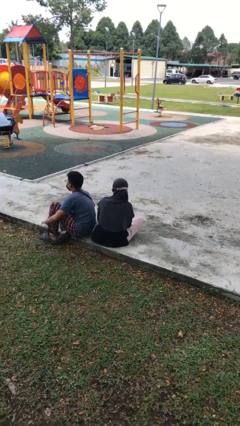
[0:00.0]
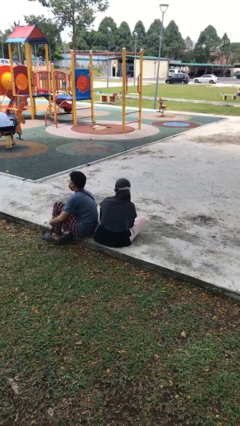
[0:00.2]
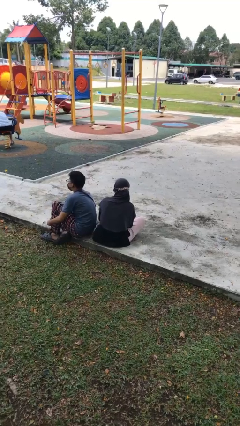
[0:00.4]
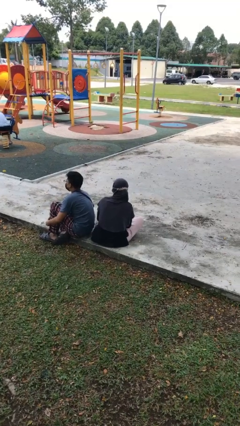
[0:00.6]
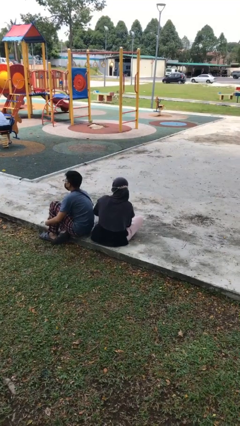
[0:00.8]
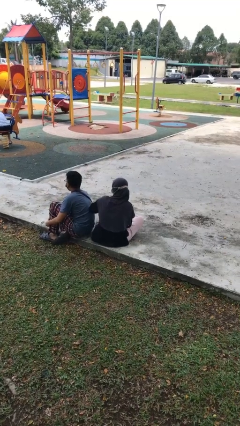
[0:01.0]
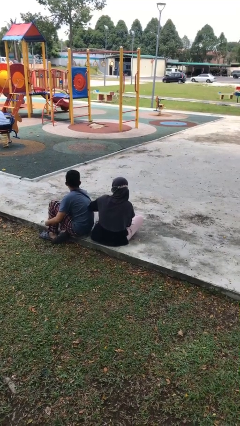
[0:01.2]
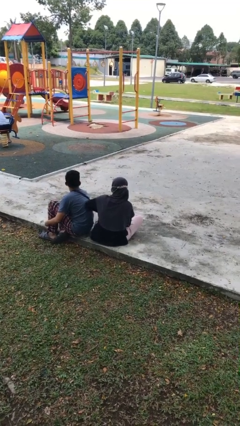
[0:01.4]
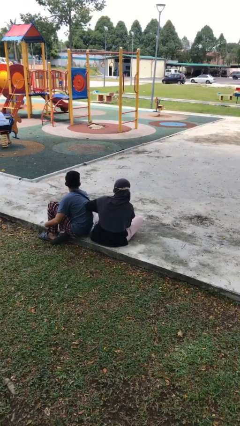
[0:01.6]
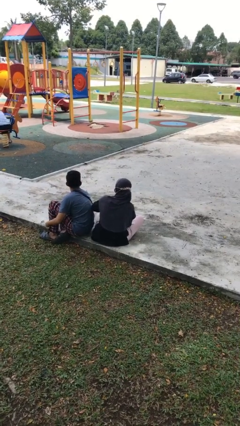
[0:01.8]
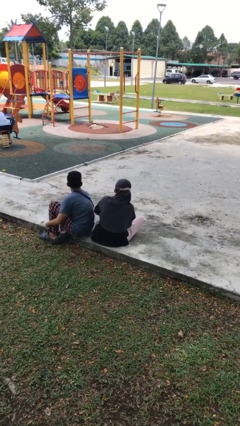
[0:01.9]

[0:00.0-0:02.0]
person nudges person with elbow

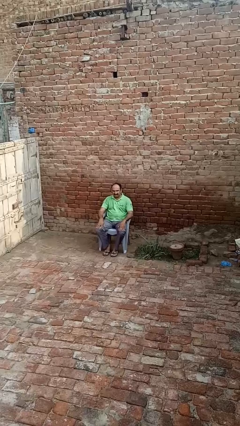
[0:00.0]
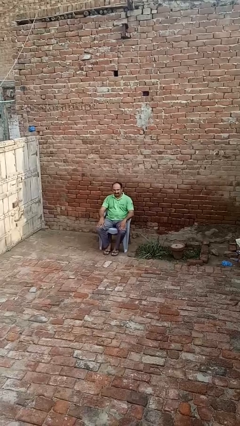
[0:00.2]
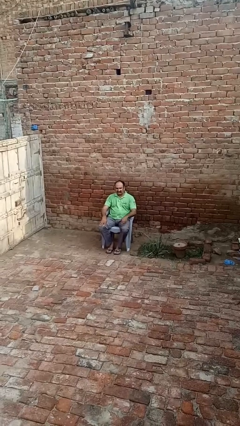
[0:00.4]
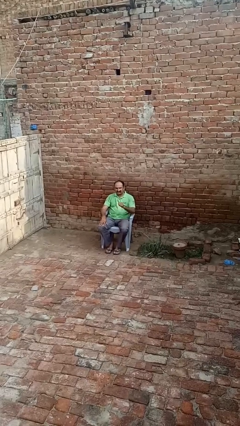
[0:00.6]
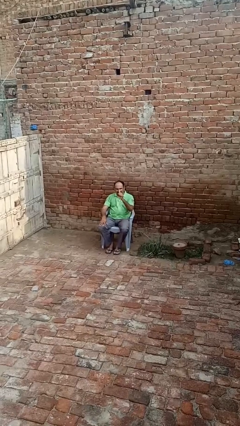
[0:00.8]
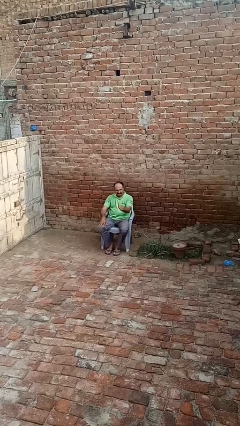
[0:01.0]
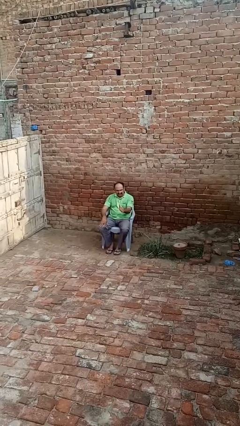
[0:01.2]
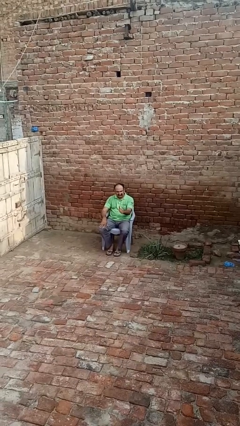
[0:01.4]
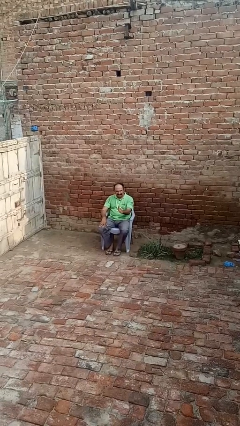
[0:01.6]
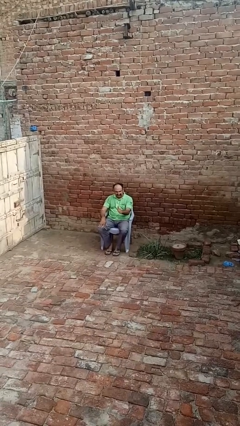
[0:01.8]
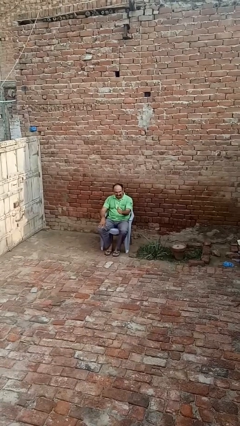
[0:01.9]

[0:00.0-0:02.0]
person gestures thumbs up

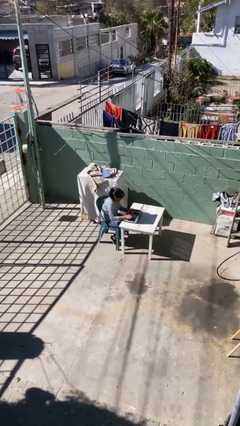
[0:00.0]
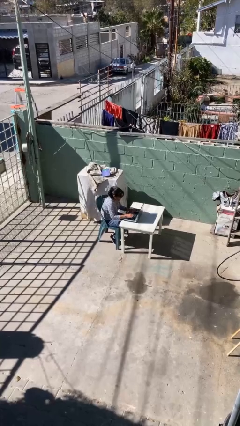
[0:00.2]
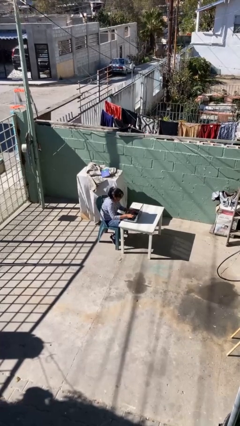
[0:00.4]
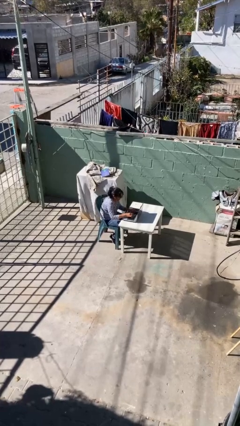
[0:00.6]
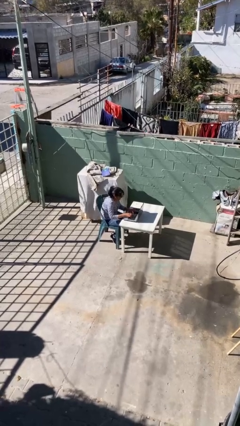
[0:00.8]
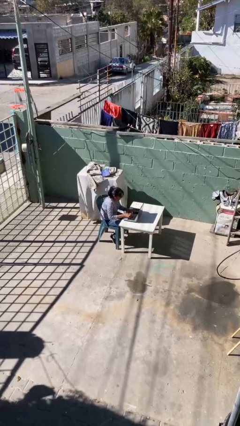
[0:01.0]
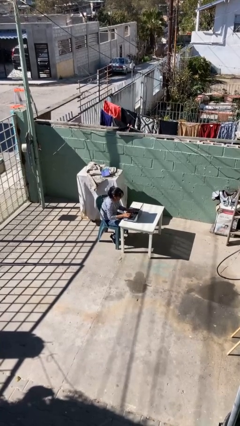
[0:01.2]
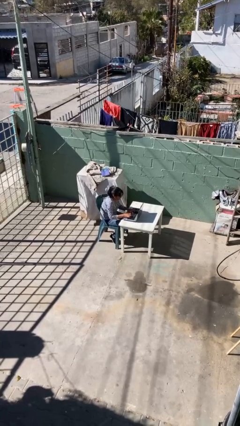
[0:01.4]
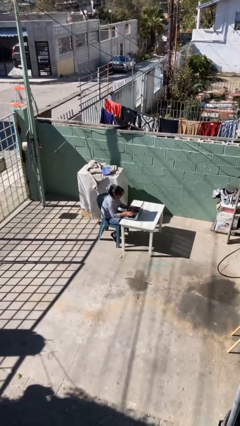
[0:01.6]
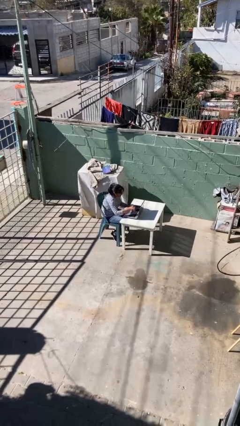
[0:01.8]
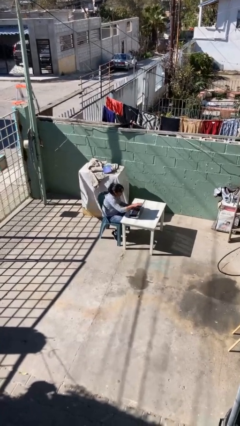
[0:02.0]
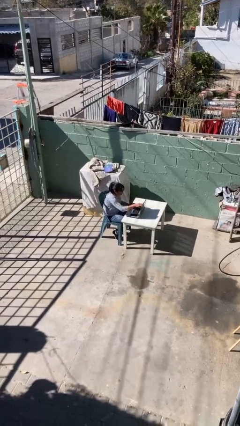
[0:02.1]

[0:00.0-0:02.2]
person interacts with laptop

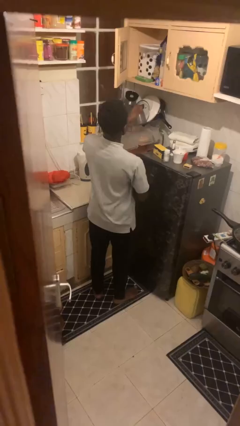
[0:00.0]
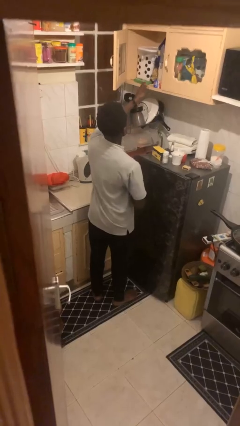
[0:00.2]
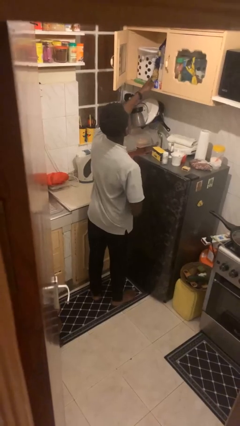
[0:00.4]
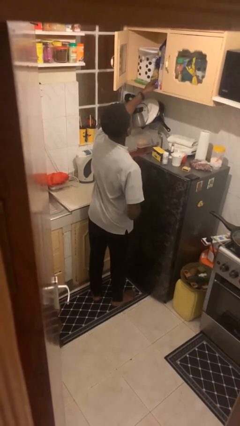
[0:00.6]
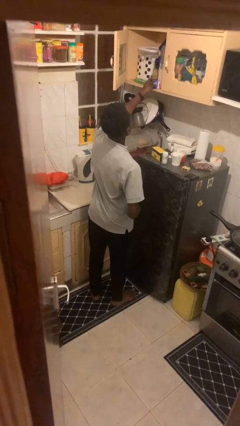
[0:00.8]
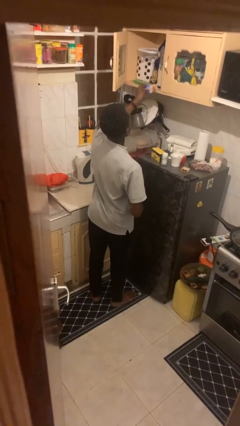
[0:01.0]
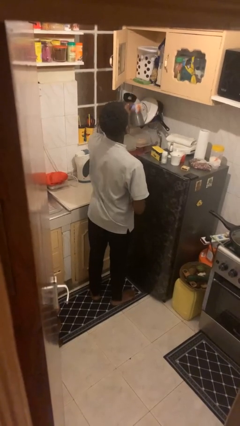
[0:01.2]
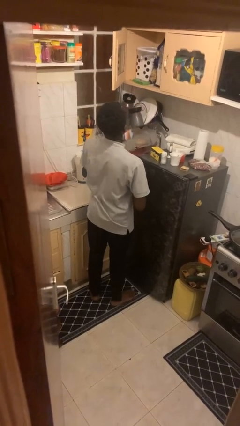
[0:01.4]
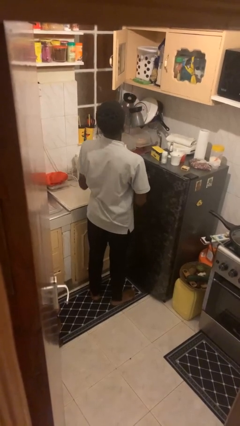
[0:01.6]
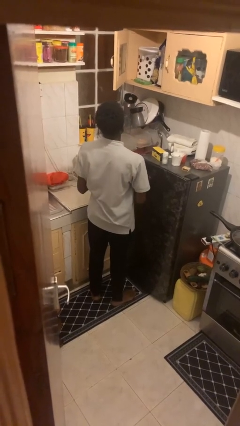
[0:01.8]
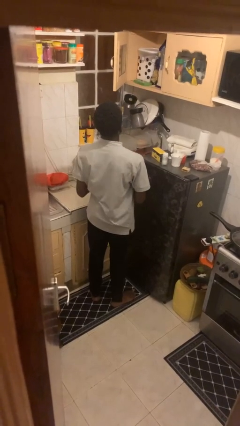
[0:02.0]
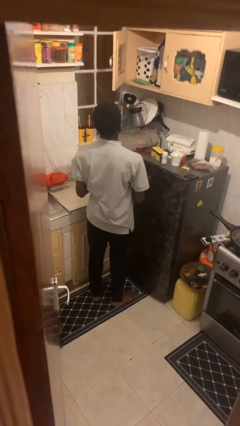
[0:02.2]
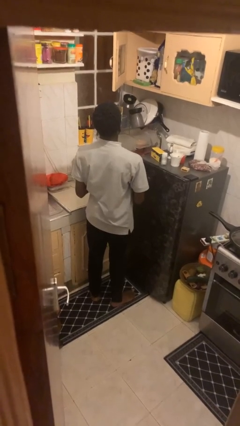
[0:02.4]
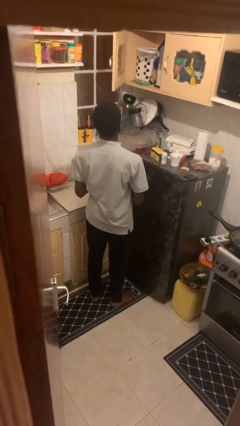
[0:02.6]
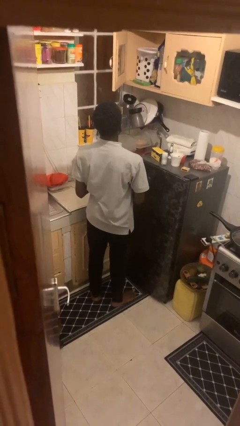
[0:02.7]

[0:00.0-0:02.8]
person picks up object from cabinet

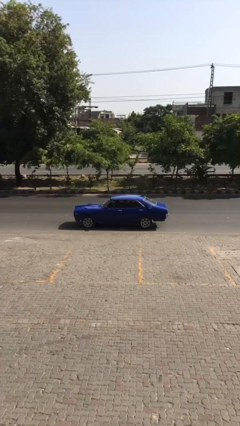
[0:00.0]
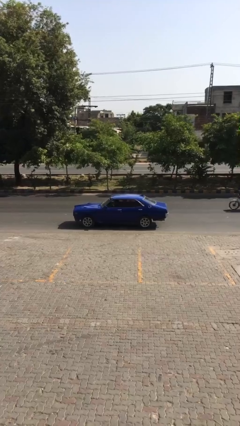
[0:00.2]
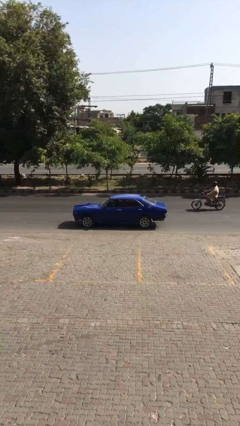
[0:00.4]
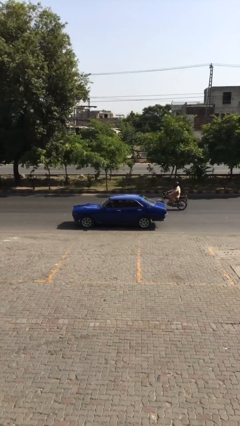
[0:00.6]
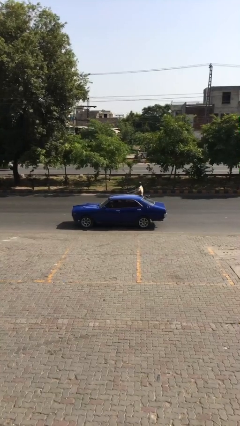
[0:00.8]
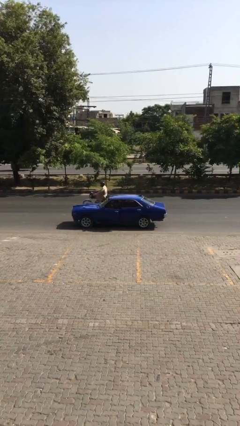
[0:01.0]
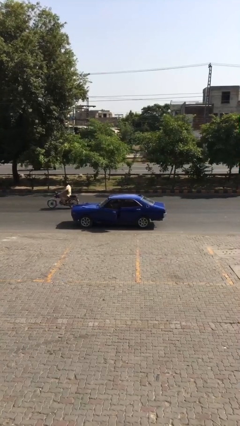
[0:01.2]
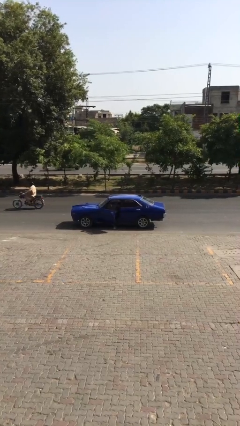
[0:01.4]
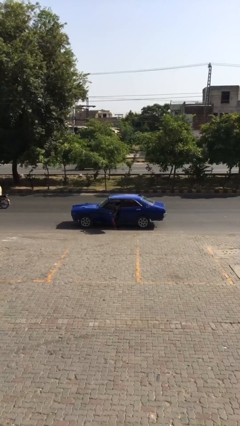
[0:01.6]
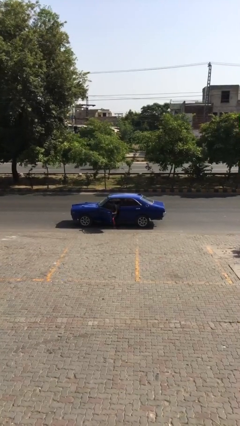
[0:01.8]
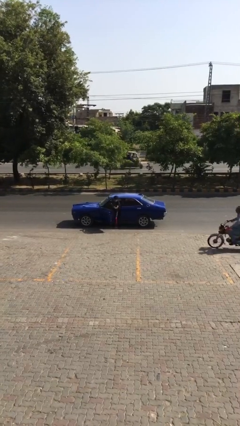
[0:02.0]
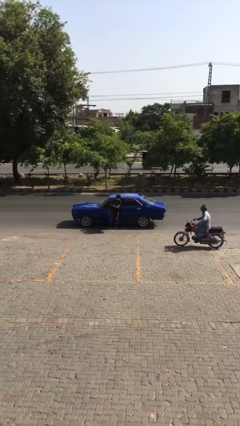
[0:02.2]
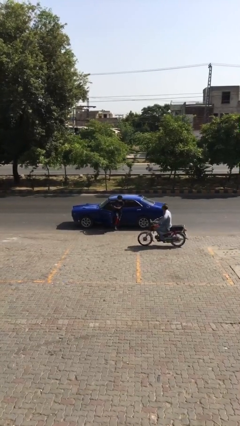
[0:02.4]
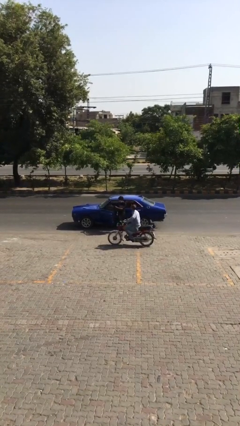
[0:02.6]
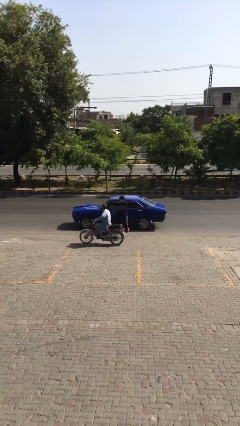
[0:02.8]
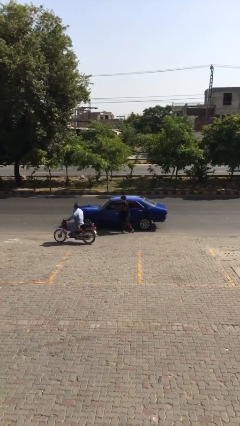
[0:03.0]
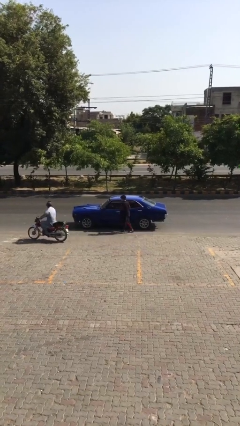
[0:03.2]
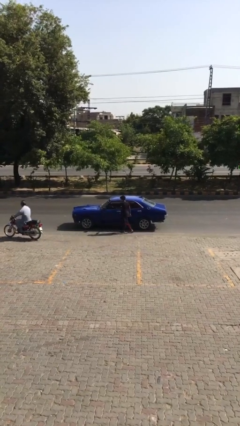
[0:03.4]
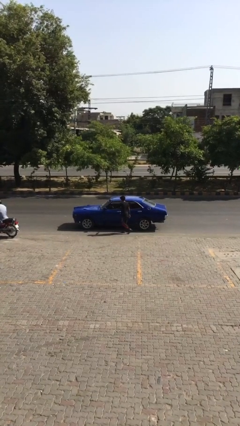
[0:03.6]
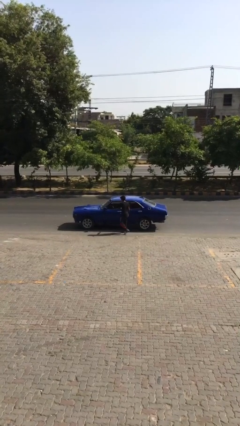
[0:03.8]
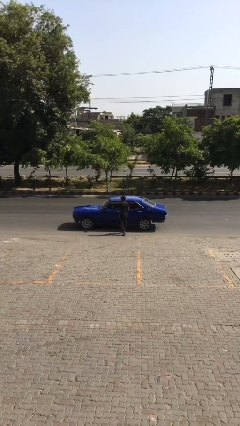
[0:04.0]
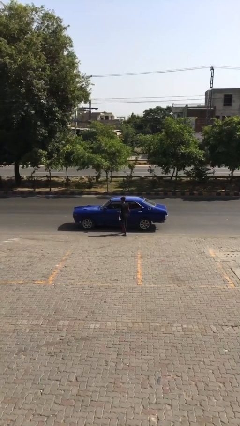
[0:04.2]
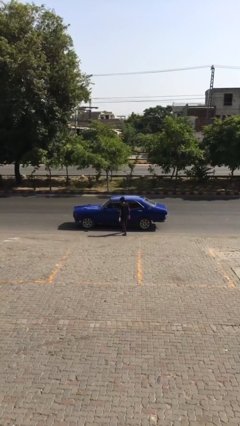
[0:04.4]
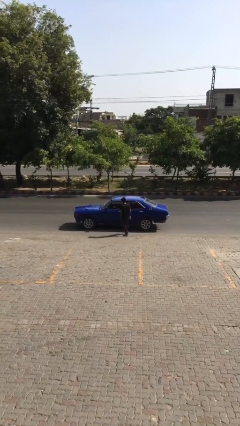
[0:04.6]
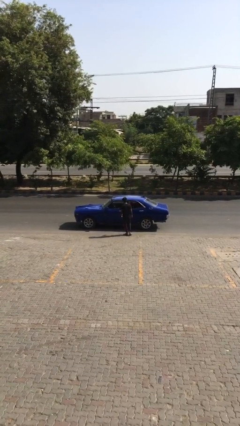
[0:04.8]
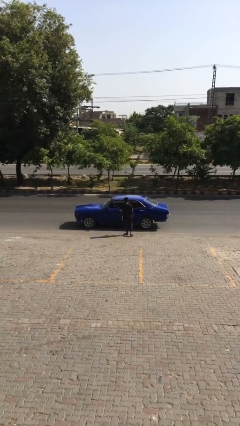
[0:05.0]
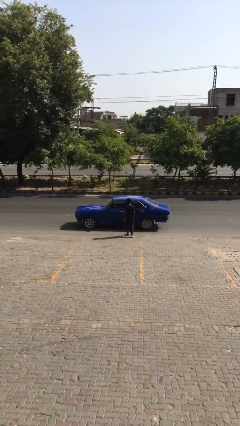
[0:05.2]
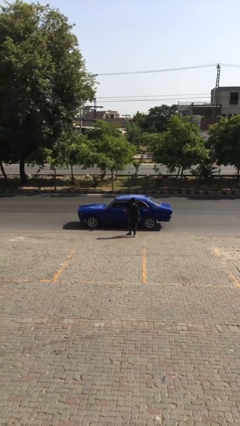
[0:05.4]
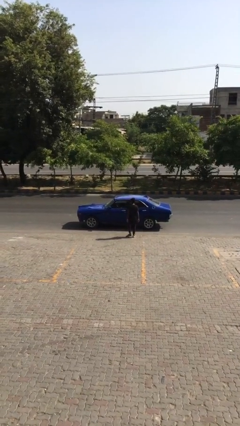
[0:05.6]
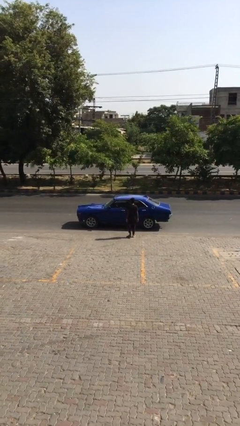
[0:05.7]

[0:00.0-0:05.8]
car drops off person

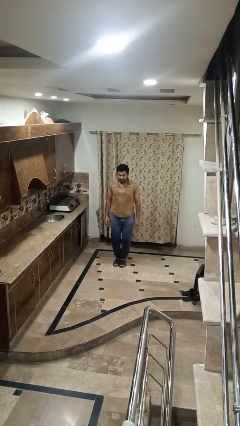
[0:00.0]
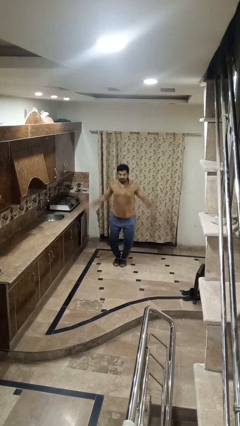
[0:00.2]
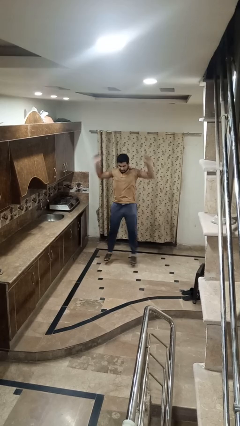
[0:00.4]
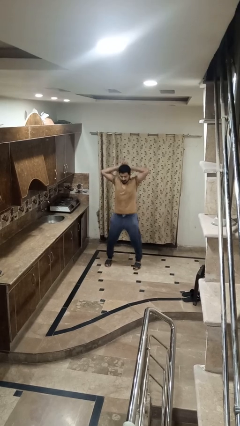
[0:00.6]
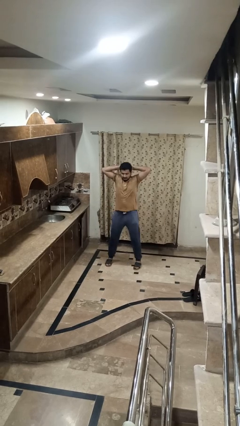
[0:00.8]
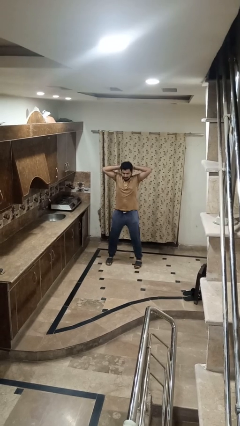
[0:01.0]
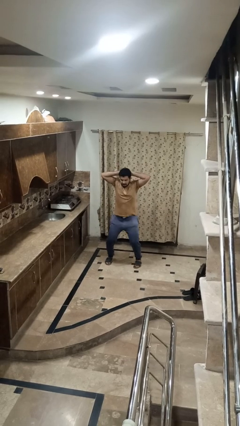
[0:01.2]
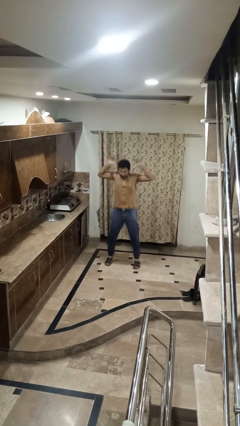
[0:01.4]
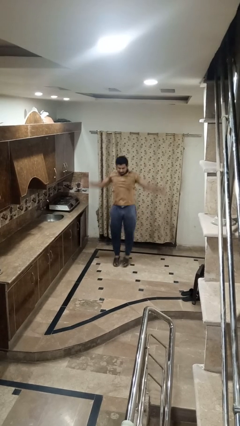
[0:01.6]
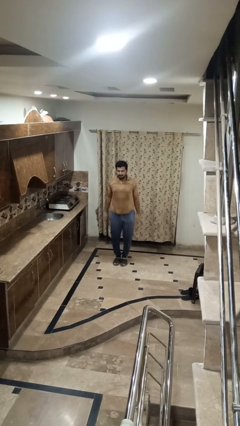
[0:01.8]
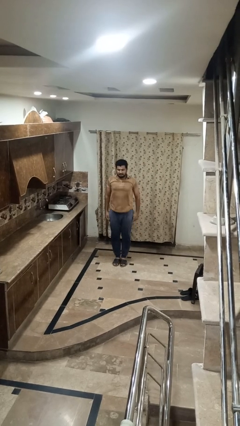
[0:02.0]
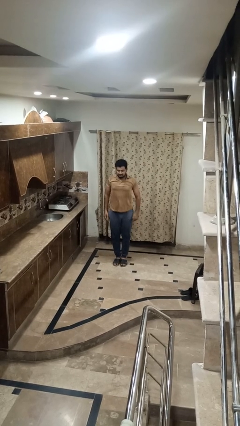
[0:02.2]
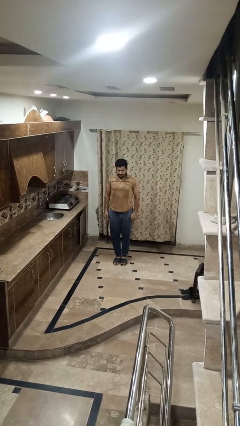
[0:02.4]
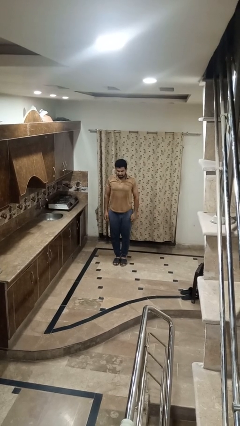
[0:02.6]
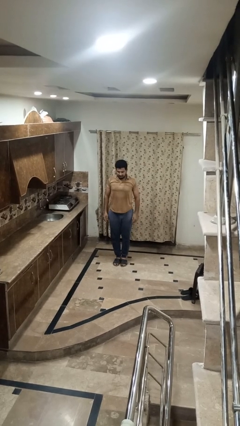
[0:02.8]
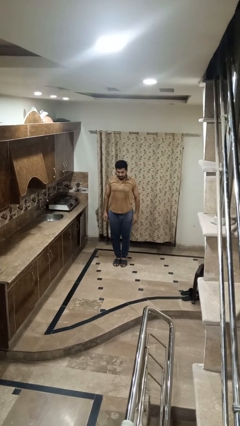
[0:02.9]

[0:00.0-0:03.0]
person exercises with jumping jacks
